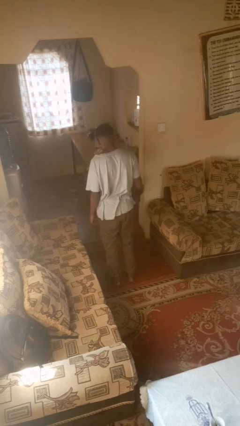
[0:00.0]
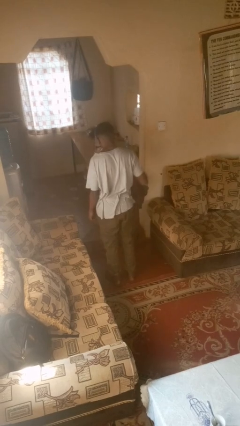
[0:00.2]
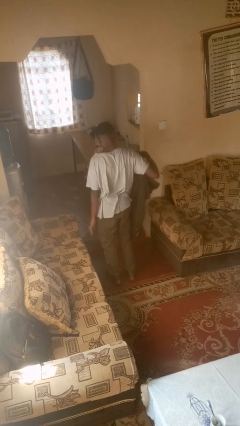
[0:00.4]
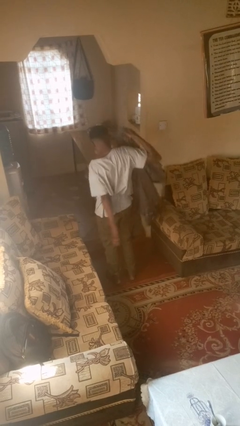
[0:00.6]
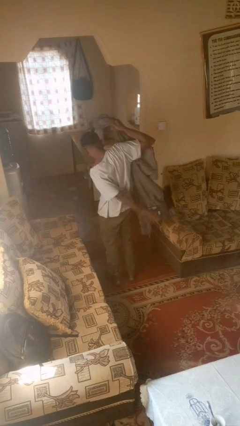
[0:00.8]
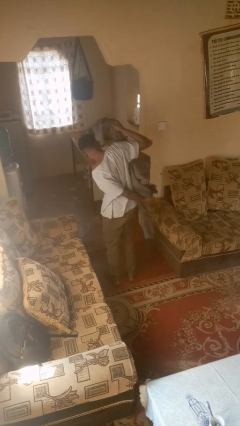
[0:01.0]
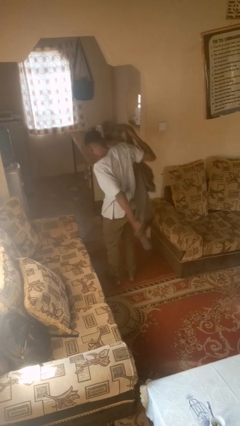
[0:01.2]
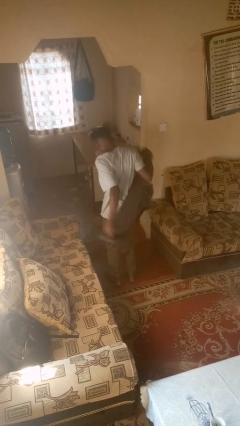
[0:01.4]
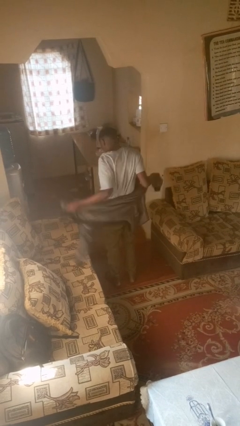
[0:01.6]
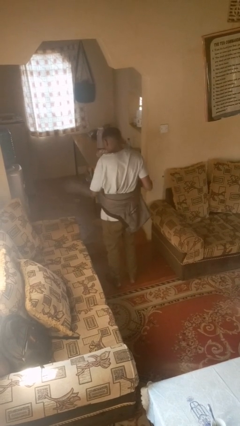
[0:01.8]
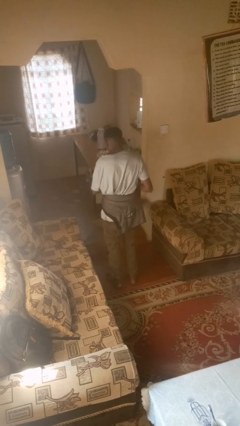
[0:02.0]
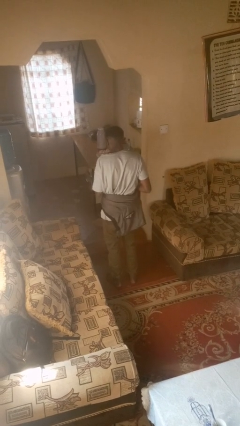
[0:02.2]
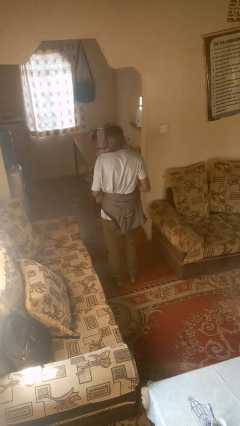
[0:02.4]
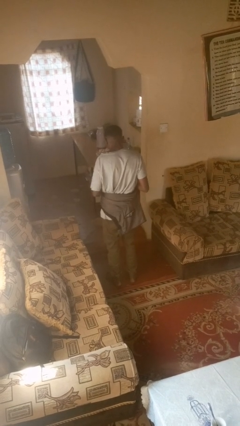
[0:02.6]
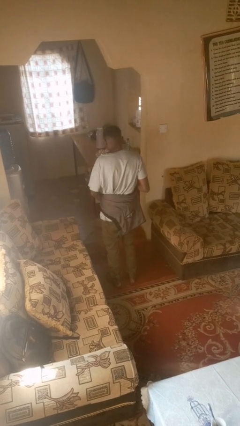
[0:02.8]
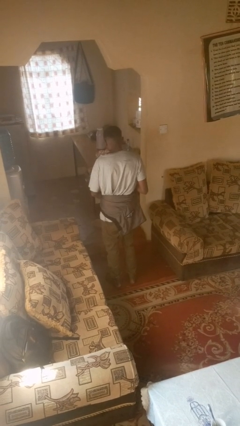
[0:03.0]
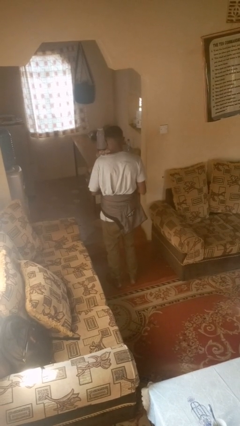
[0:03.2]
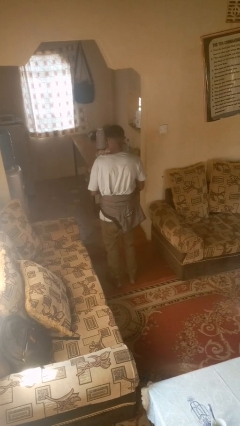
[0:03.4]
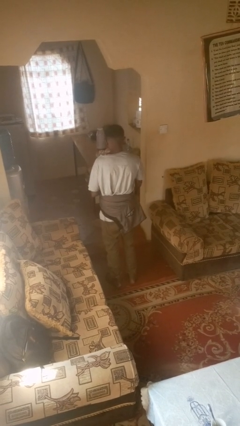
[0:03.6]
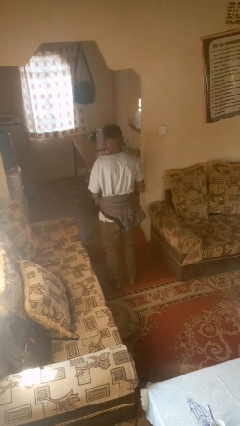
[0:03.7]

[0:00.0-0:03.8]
person ties jacket around waist

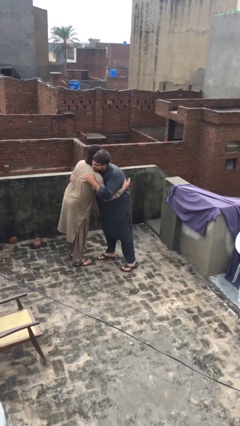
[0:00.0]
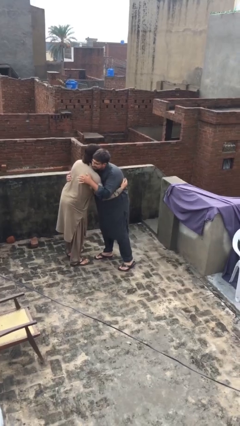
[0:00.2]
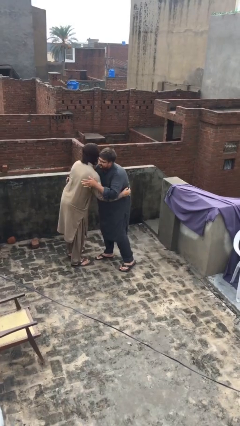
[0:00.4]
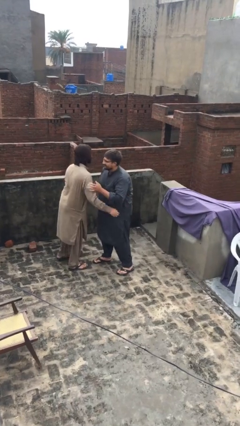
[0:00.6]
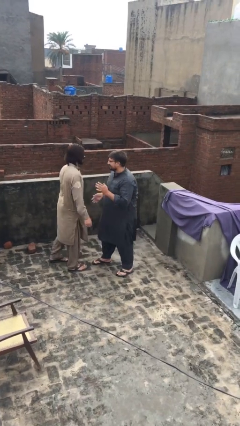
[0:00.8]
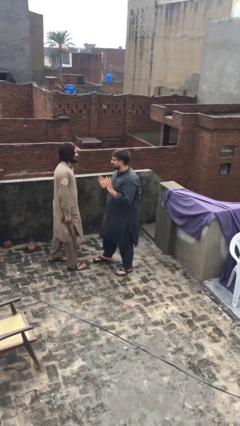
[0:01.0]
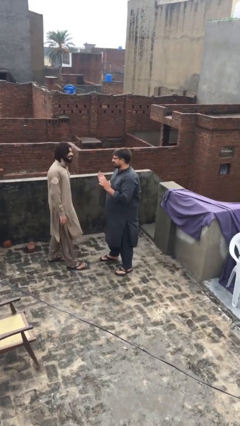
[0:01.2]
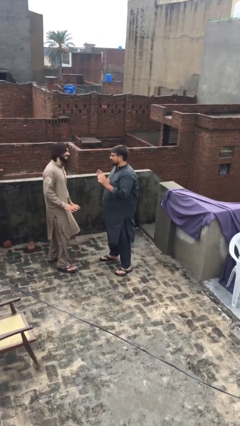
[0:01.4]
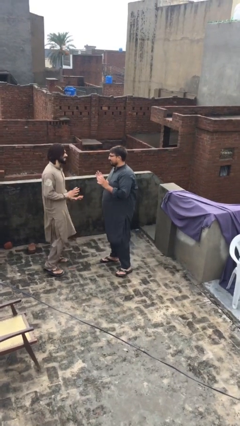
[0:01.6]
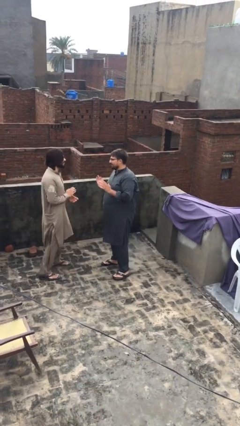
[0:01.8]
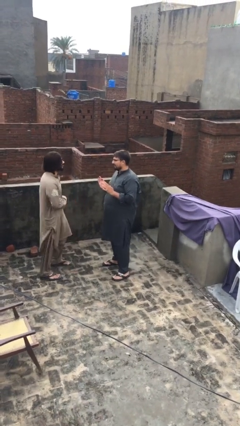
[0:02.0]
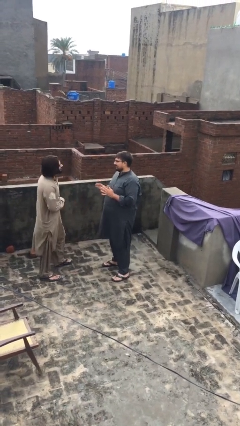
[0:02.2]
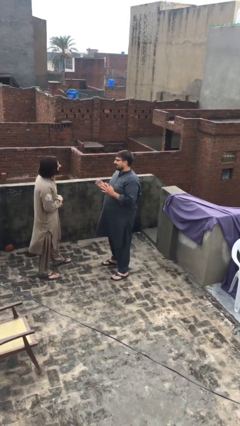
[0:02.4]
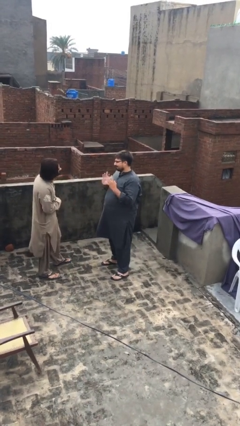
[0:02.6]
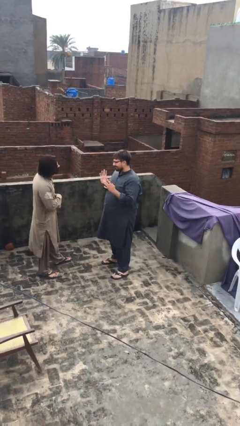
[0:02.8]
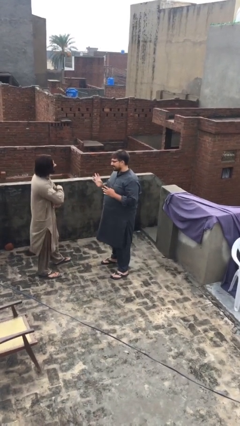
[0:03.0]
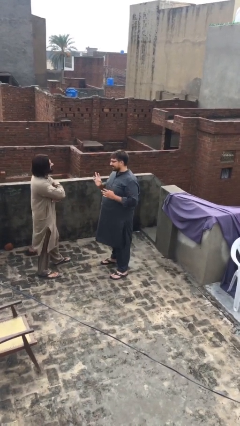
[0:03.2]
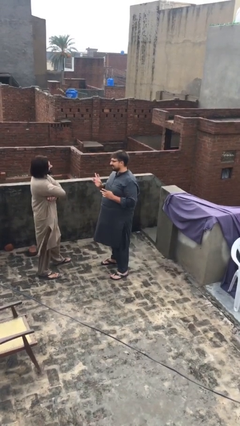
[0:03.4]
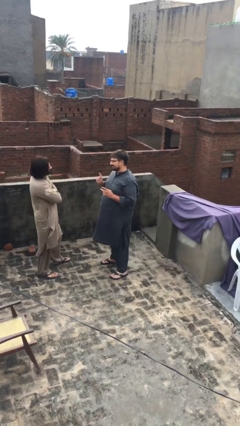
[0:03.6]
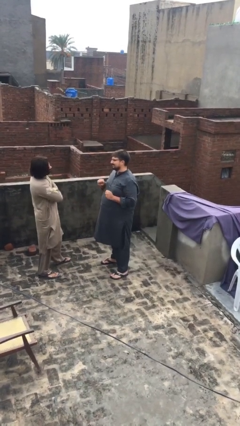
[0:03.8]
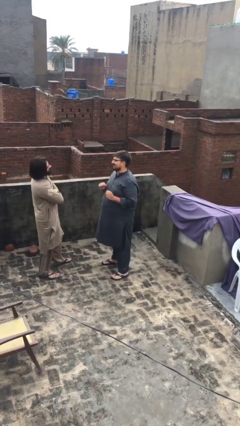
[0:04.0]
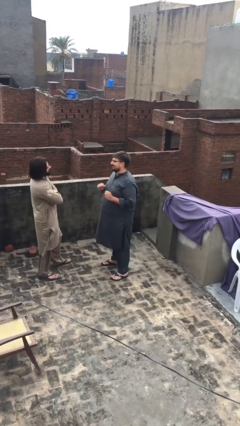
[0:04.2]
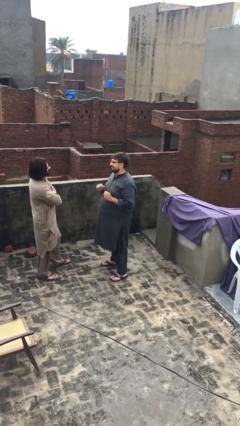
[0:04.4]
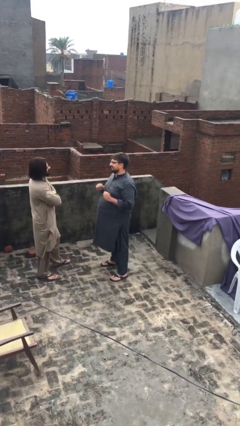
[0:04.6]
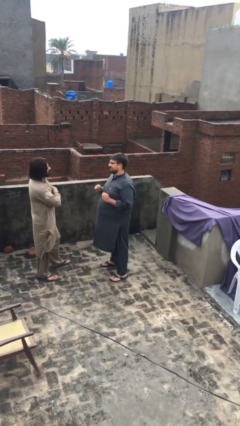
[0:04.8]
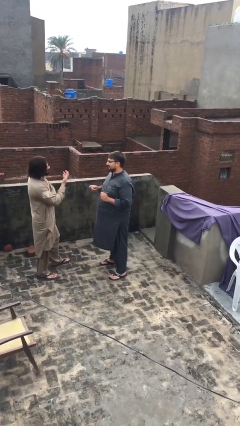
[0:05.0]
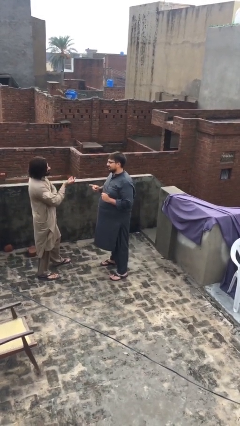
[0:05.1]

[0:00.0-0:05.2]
person talks to person

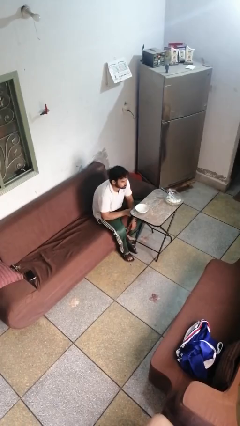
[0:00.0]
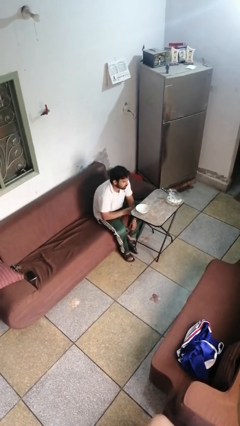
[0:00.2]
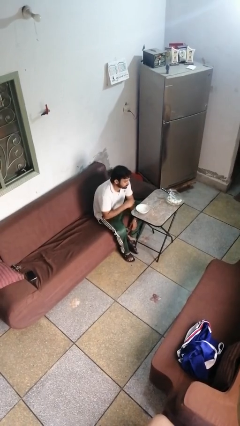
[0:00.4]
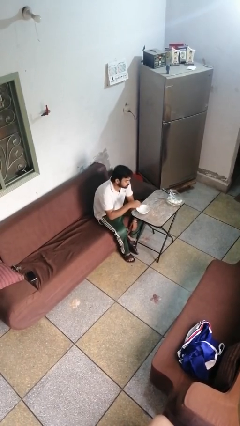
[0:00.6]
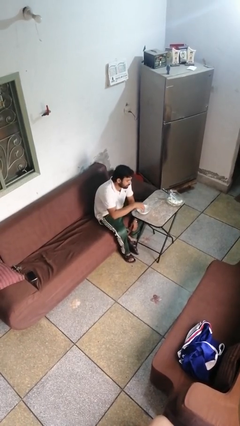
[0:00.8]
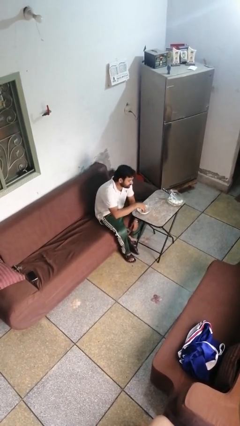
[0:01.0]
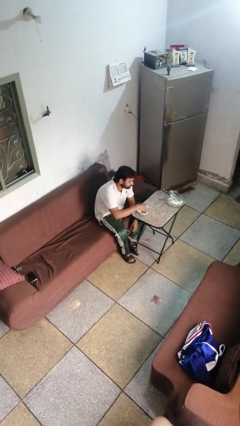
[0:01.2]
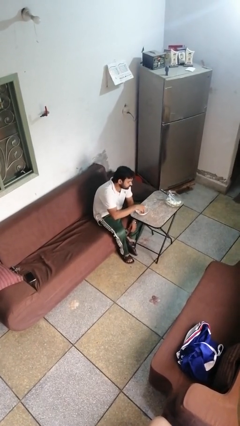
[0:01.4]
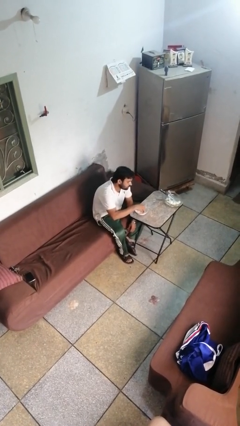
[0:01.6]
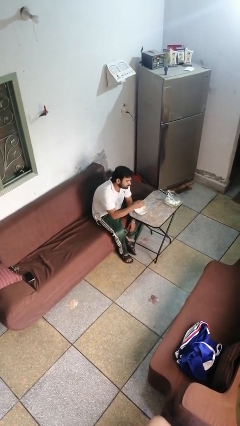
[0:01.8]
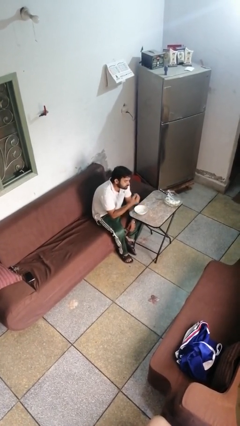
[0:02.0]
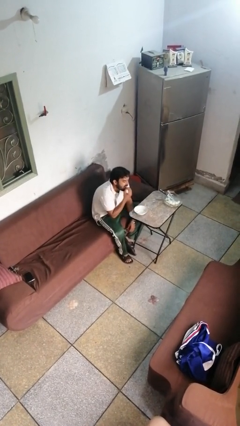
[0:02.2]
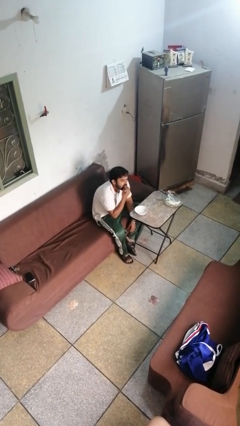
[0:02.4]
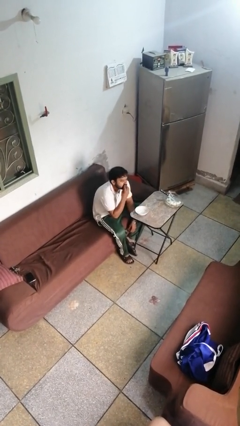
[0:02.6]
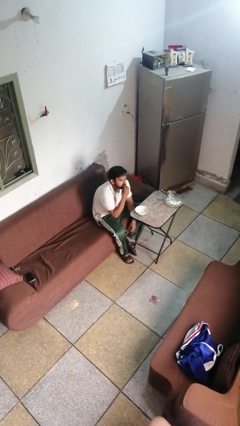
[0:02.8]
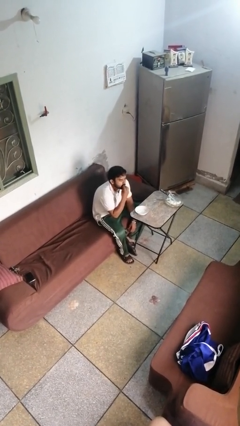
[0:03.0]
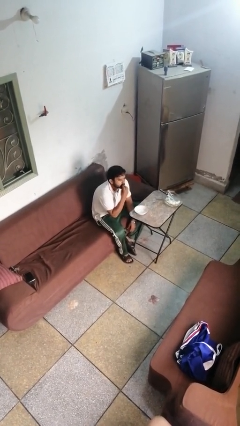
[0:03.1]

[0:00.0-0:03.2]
person eats with hands

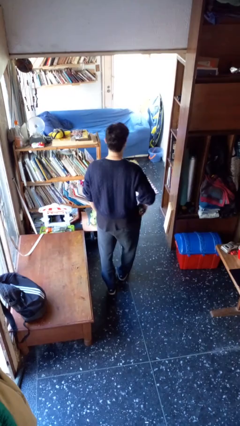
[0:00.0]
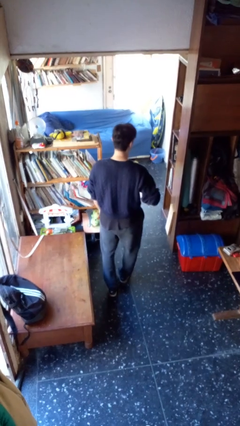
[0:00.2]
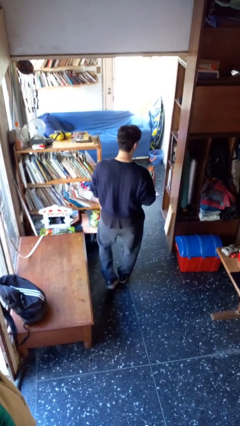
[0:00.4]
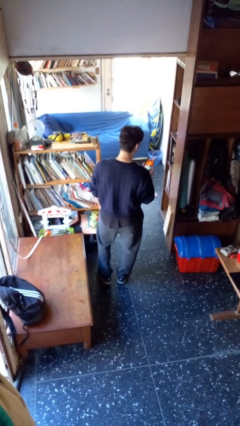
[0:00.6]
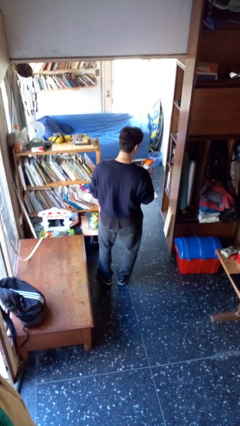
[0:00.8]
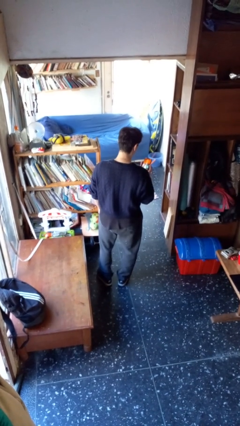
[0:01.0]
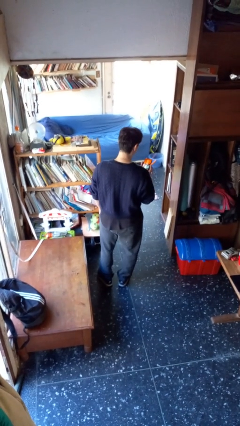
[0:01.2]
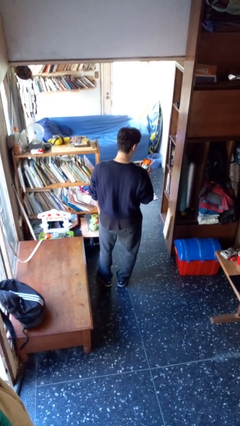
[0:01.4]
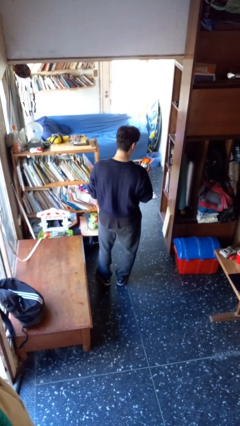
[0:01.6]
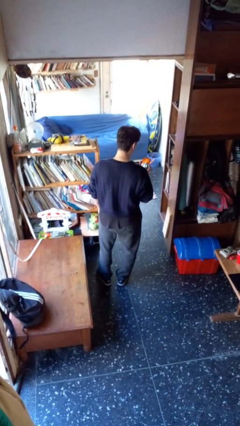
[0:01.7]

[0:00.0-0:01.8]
person takes phone from pocket

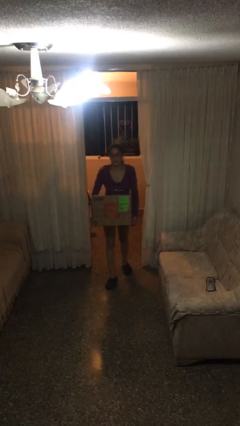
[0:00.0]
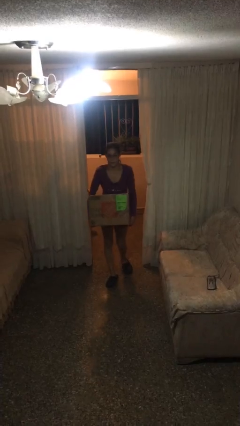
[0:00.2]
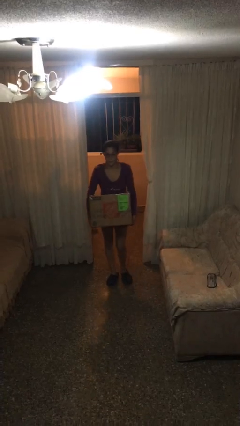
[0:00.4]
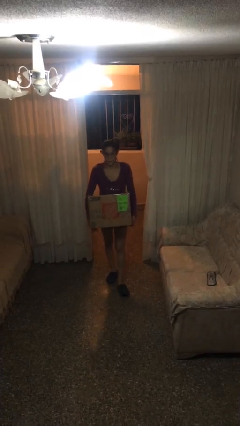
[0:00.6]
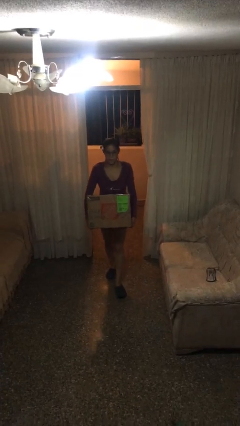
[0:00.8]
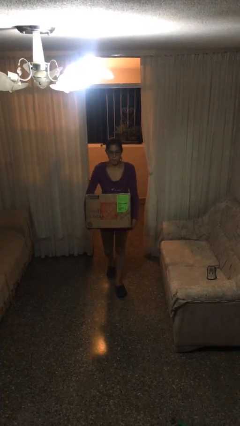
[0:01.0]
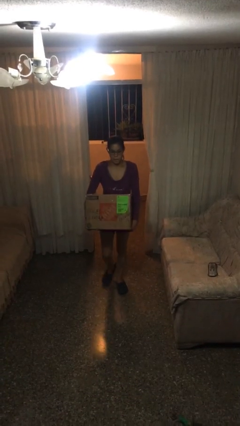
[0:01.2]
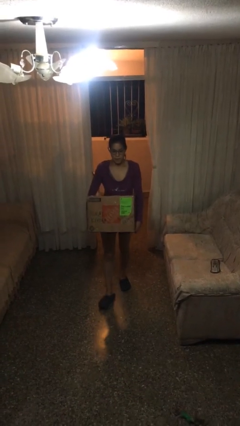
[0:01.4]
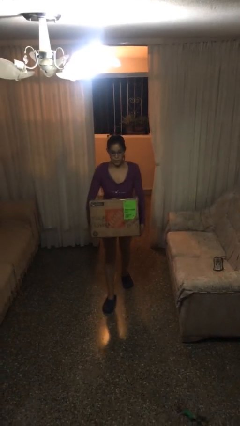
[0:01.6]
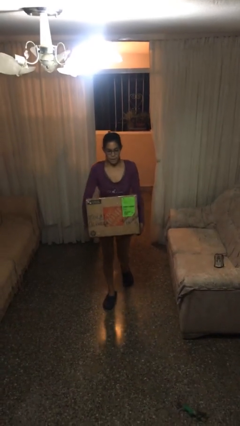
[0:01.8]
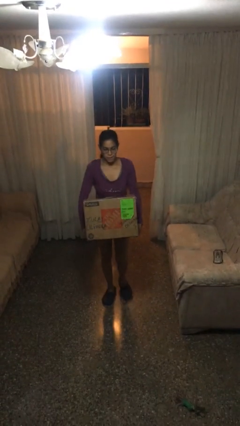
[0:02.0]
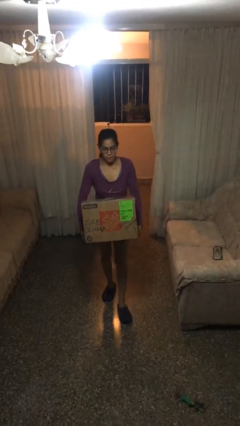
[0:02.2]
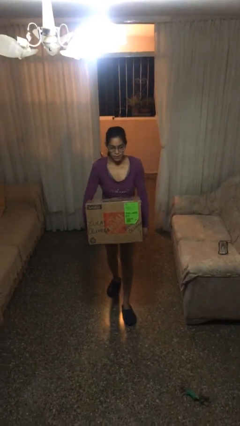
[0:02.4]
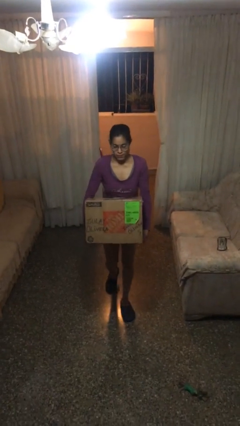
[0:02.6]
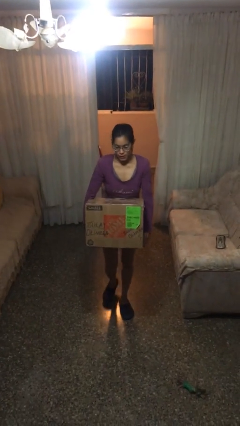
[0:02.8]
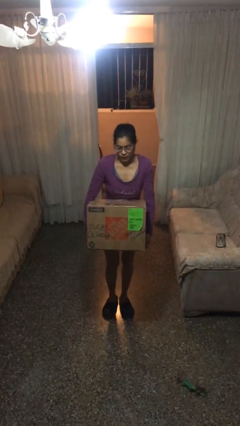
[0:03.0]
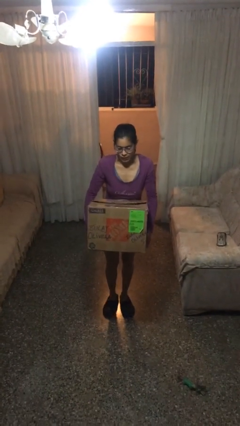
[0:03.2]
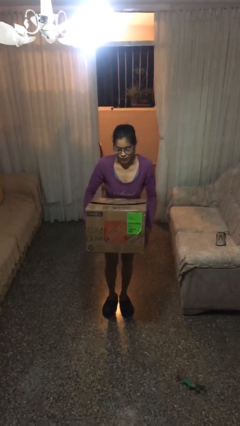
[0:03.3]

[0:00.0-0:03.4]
person carries heavy object

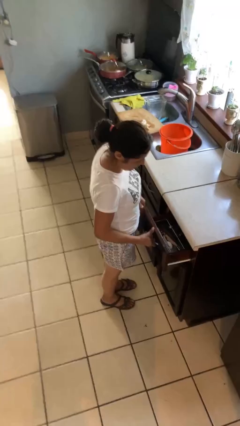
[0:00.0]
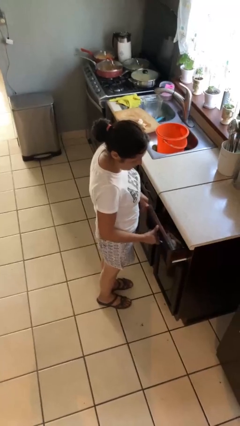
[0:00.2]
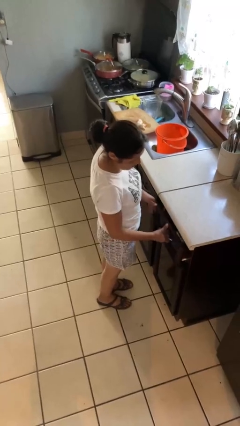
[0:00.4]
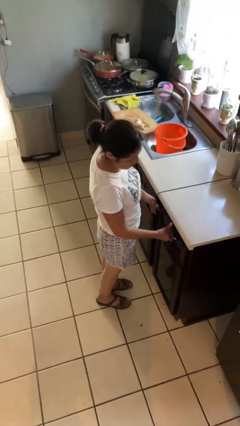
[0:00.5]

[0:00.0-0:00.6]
person closes kitchen drawer
